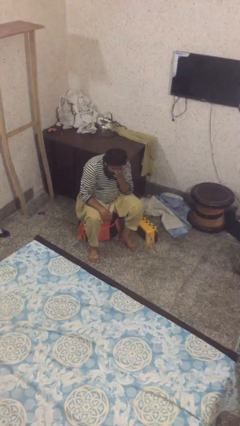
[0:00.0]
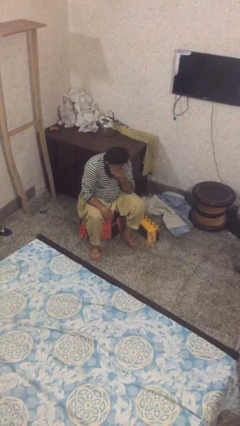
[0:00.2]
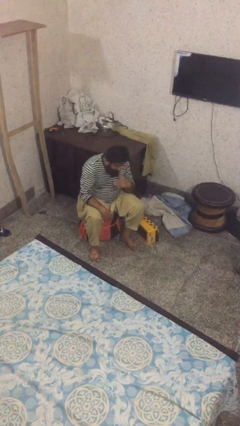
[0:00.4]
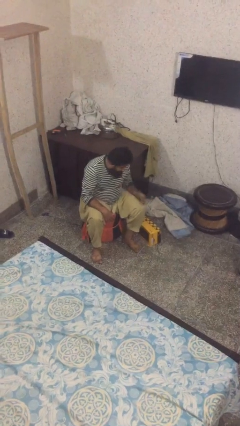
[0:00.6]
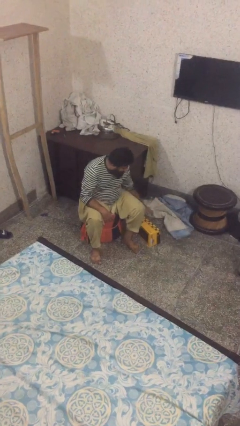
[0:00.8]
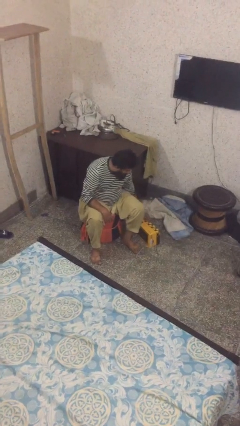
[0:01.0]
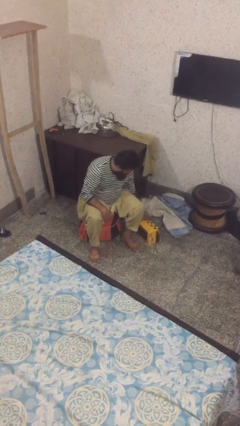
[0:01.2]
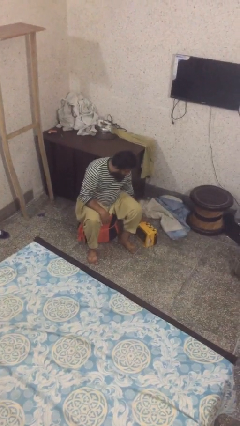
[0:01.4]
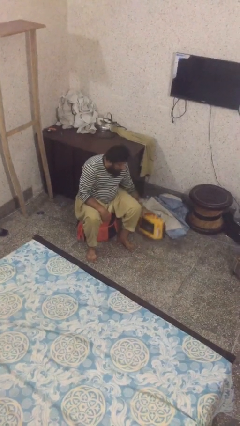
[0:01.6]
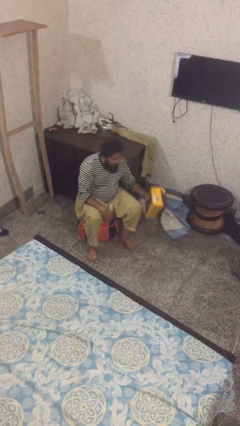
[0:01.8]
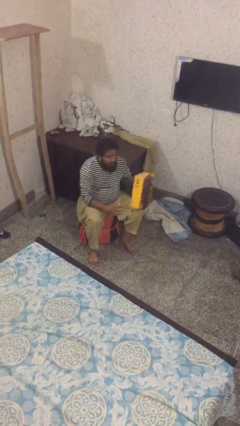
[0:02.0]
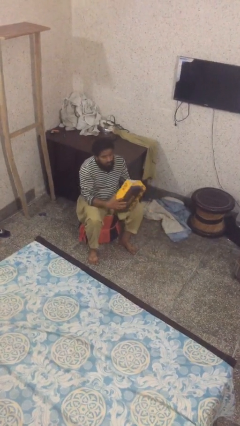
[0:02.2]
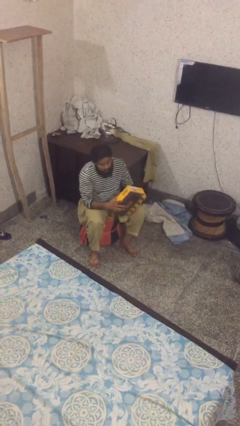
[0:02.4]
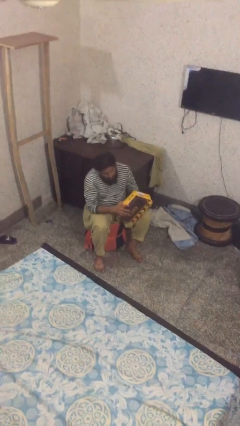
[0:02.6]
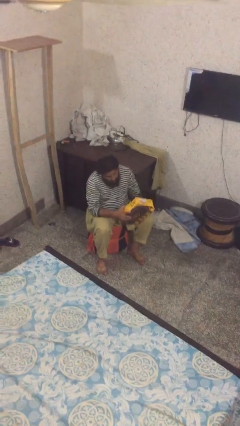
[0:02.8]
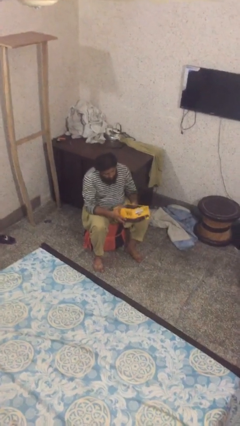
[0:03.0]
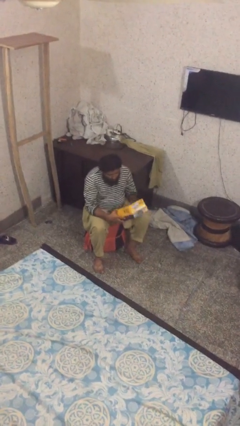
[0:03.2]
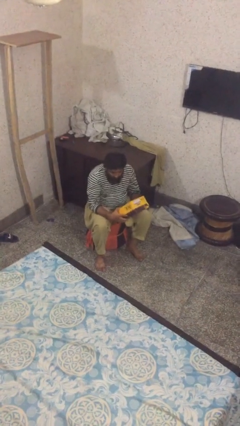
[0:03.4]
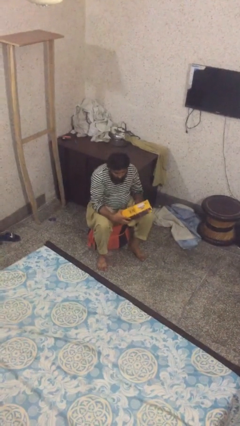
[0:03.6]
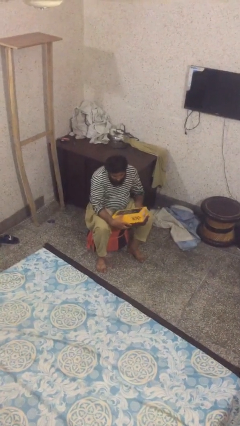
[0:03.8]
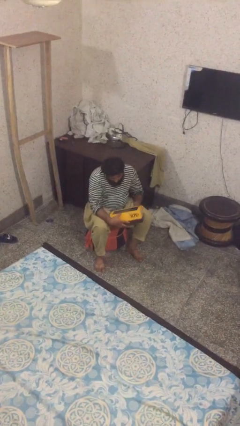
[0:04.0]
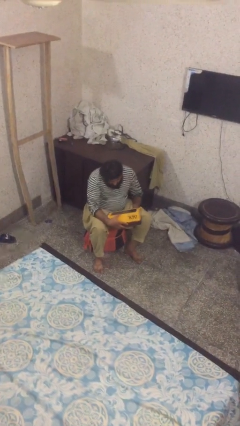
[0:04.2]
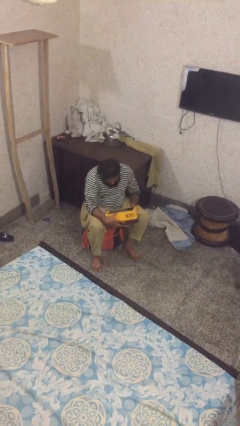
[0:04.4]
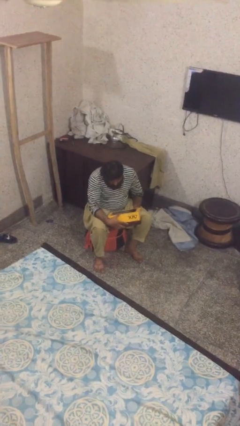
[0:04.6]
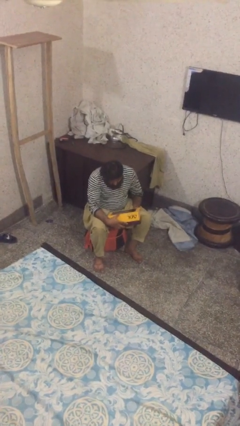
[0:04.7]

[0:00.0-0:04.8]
person picks up object from floor

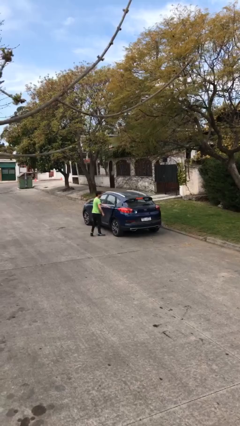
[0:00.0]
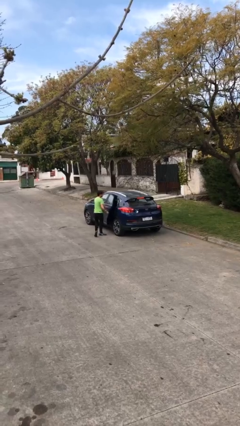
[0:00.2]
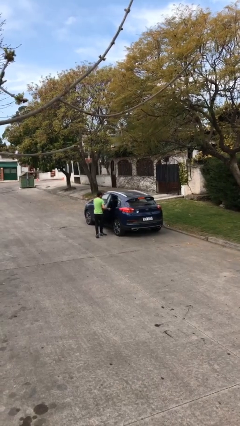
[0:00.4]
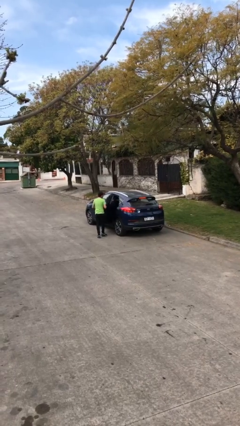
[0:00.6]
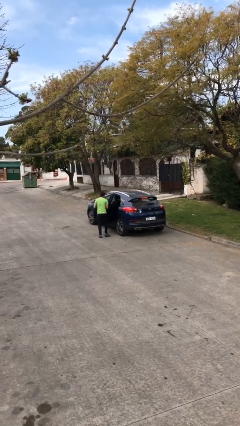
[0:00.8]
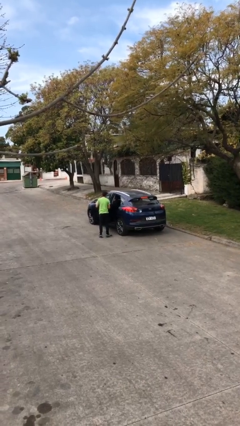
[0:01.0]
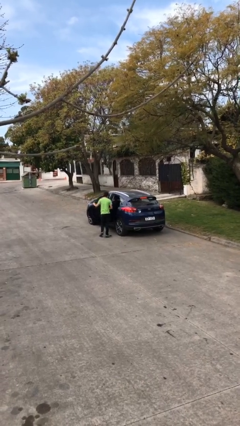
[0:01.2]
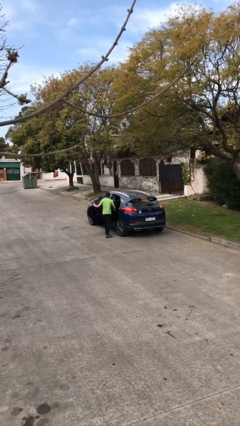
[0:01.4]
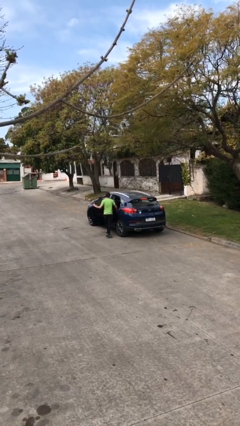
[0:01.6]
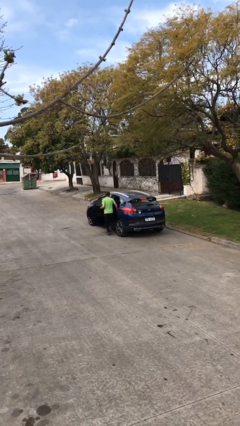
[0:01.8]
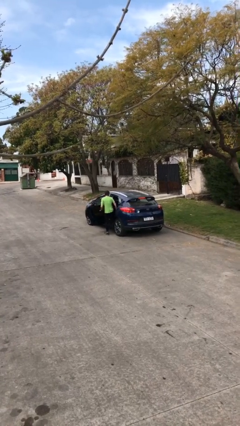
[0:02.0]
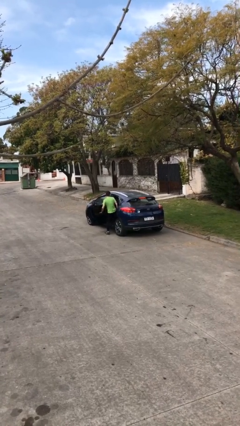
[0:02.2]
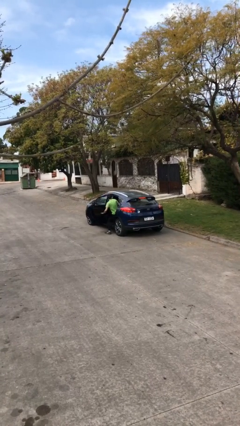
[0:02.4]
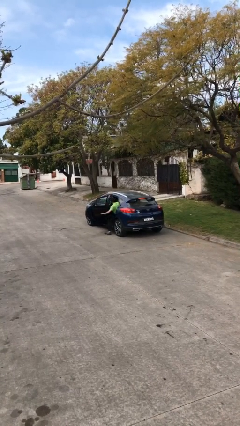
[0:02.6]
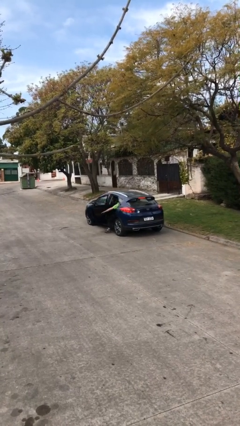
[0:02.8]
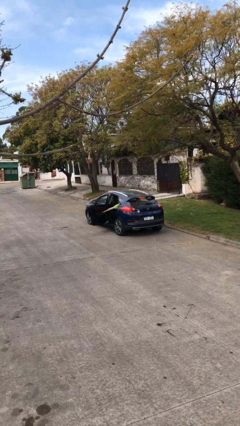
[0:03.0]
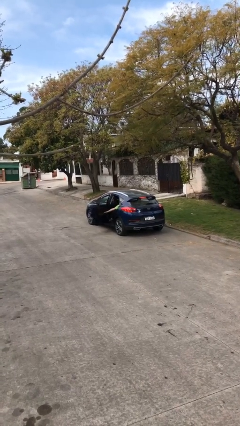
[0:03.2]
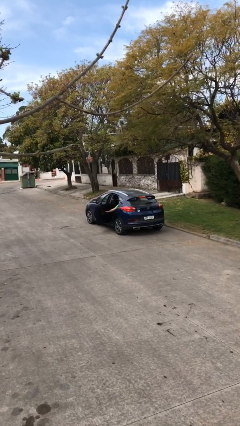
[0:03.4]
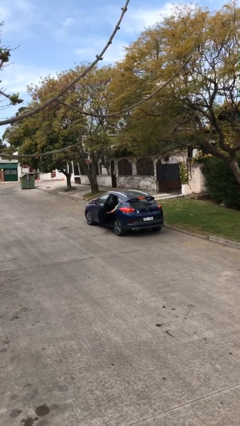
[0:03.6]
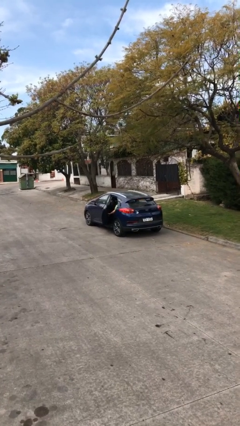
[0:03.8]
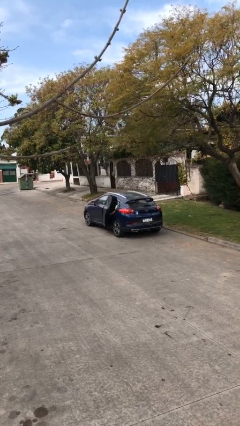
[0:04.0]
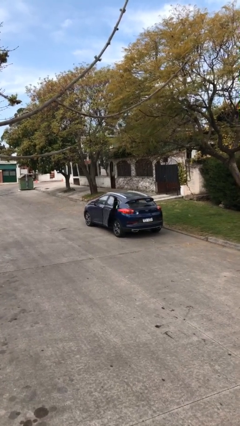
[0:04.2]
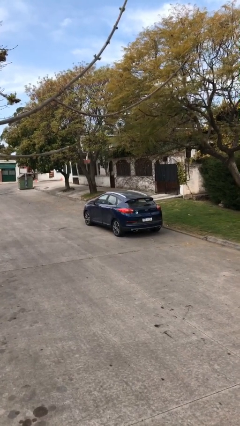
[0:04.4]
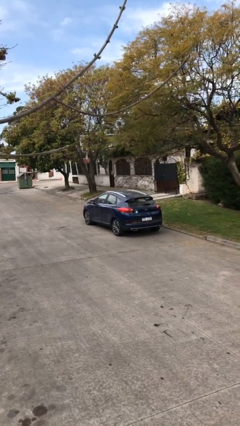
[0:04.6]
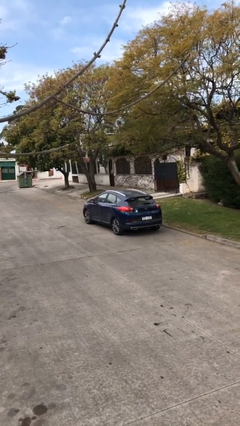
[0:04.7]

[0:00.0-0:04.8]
car picks up person

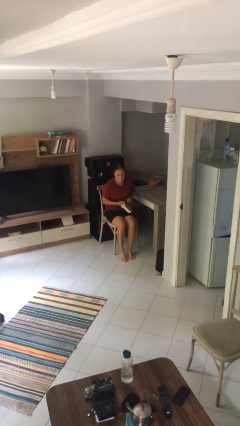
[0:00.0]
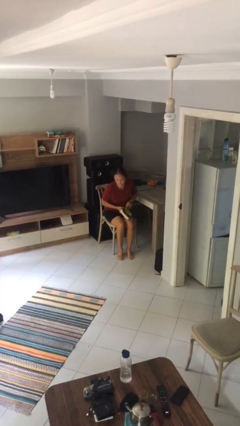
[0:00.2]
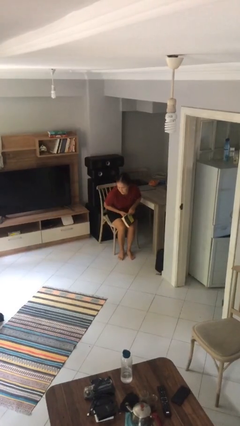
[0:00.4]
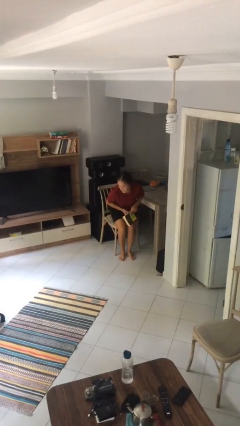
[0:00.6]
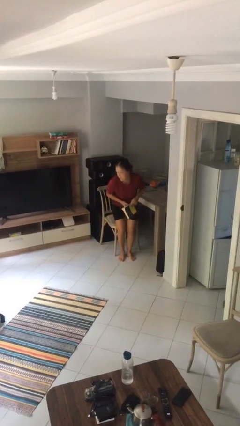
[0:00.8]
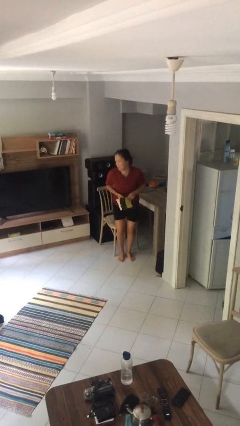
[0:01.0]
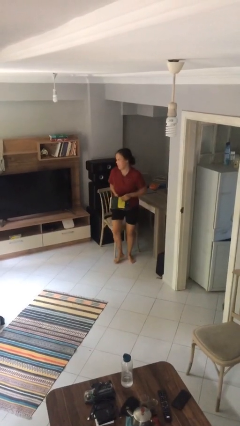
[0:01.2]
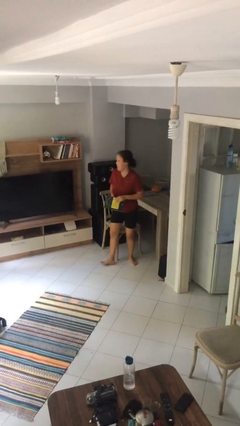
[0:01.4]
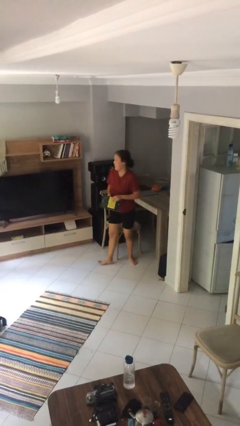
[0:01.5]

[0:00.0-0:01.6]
person stands up

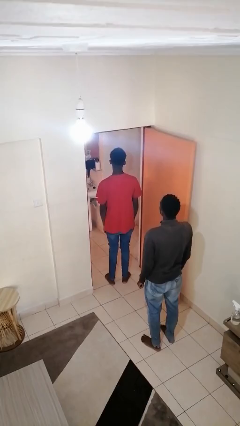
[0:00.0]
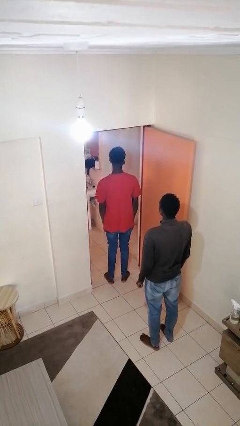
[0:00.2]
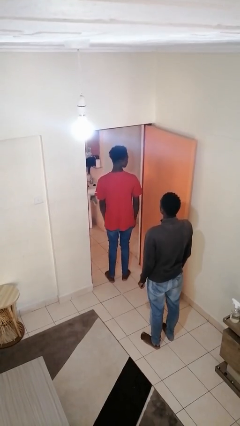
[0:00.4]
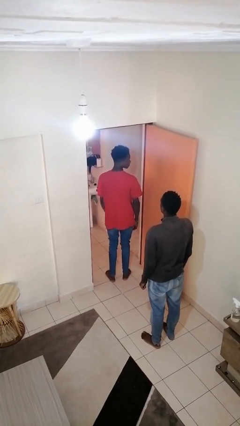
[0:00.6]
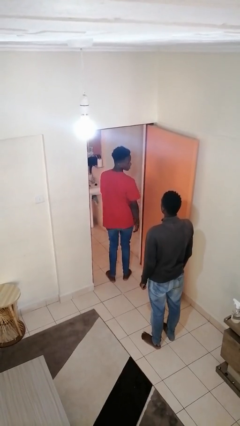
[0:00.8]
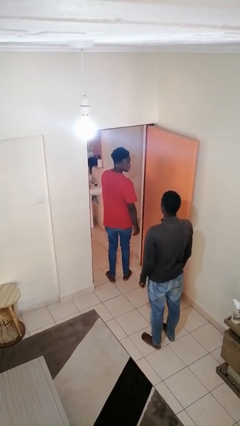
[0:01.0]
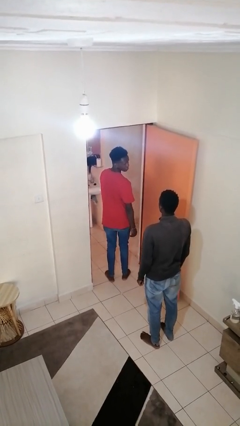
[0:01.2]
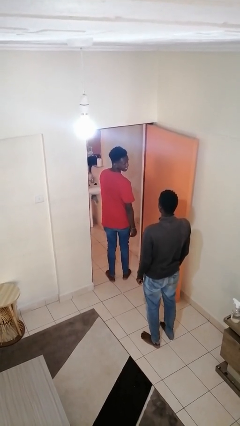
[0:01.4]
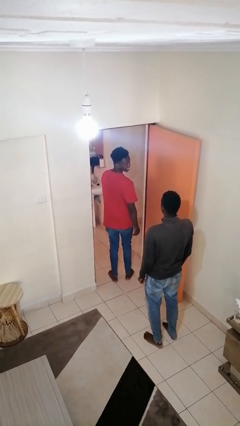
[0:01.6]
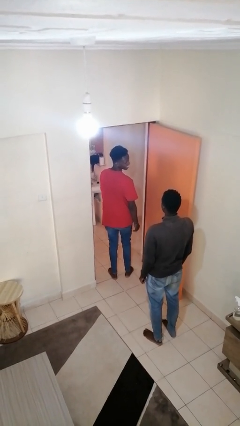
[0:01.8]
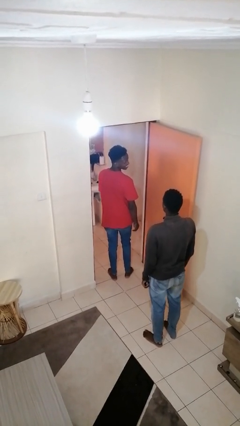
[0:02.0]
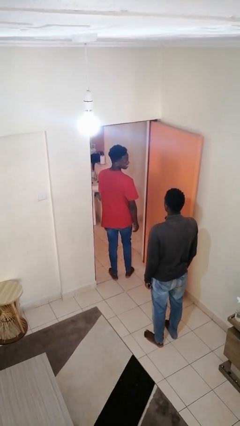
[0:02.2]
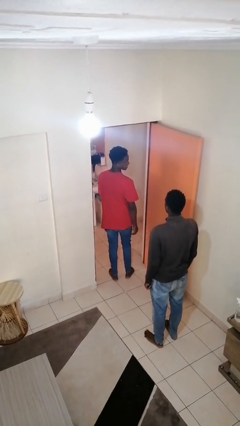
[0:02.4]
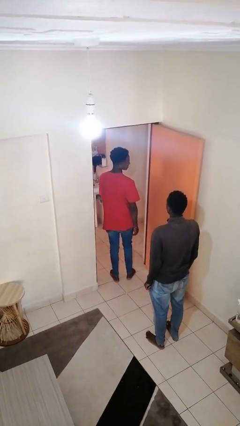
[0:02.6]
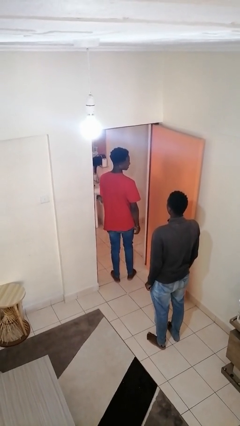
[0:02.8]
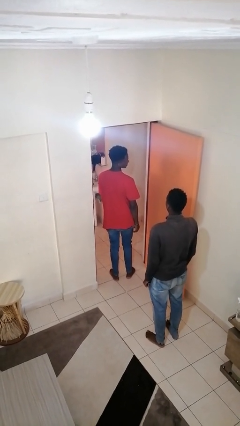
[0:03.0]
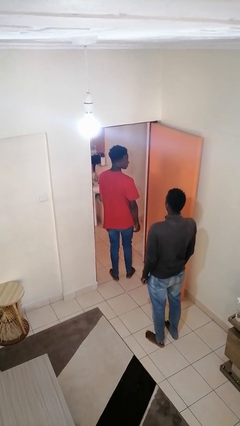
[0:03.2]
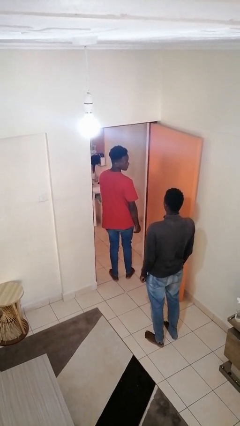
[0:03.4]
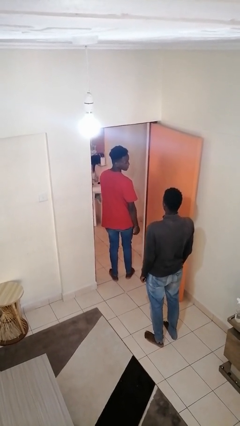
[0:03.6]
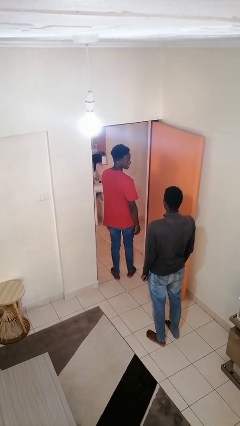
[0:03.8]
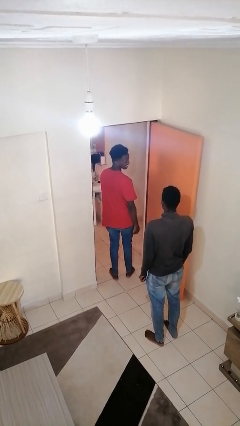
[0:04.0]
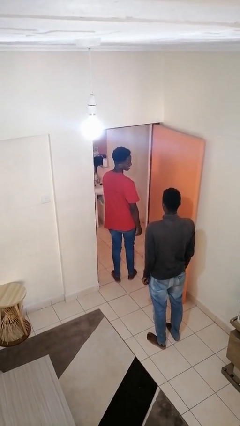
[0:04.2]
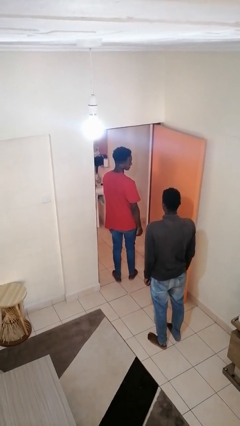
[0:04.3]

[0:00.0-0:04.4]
person looks over shoulder

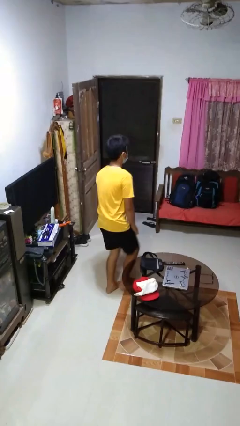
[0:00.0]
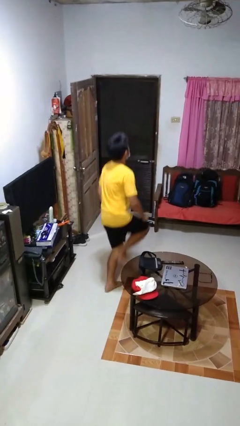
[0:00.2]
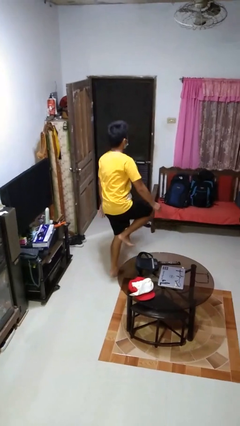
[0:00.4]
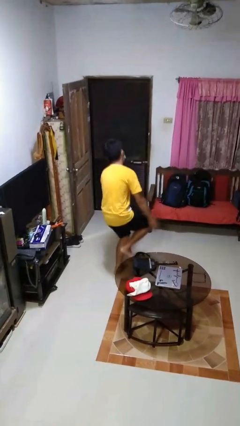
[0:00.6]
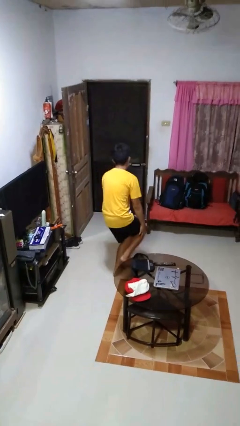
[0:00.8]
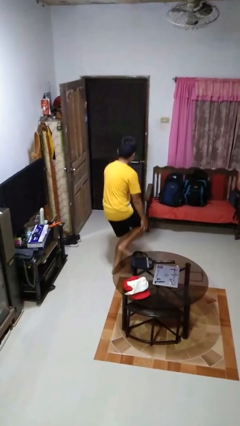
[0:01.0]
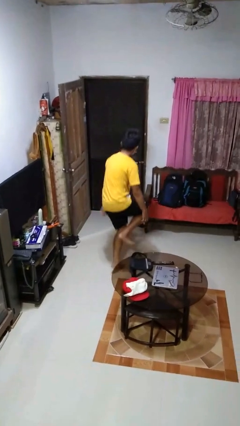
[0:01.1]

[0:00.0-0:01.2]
person trips on object on floor

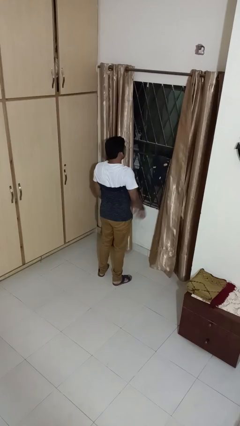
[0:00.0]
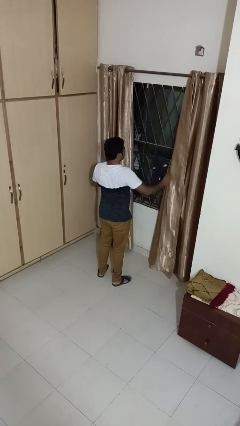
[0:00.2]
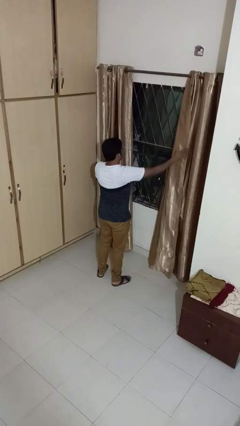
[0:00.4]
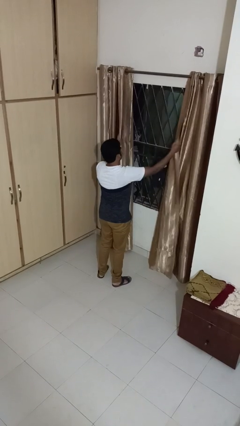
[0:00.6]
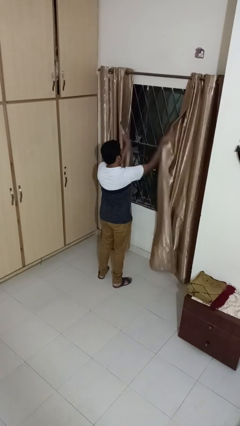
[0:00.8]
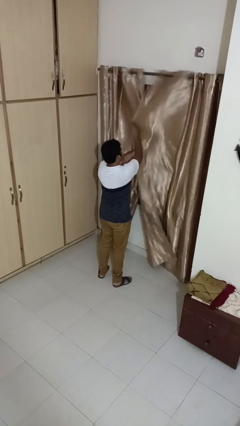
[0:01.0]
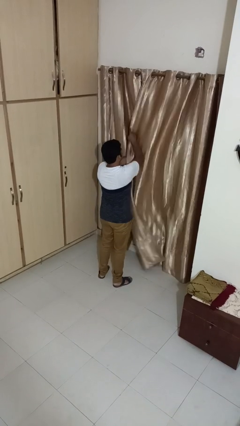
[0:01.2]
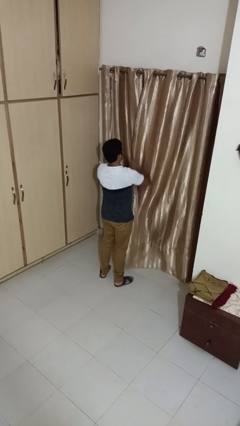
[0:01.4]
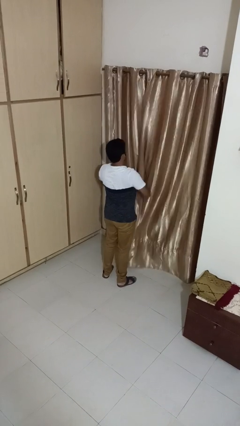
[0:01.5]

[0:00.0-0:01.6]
person closes curtains
